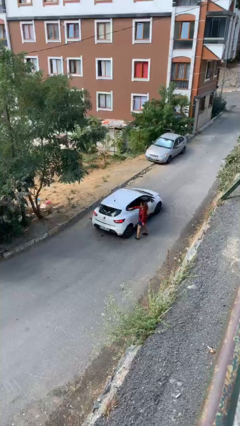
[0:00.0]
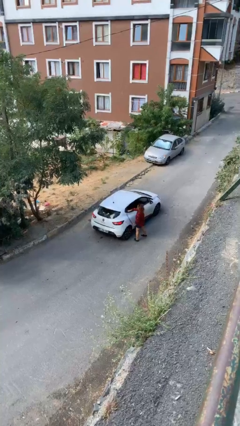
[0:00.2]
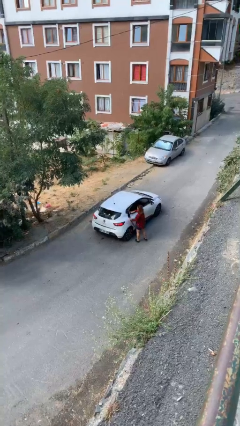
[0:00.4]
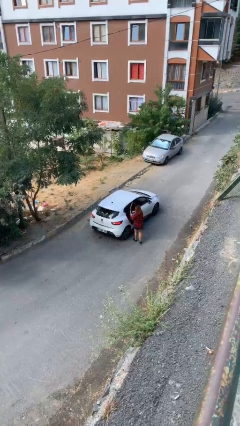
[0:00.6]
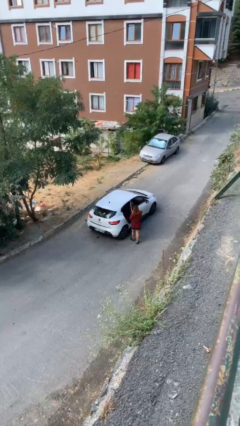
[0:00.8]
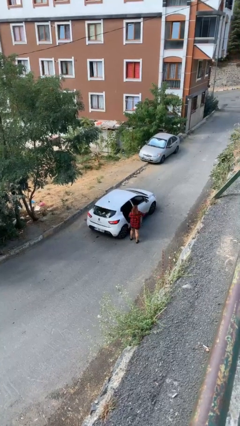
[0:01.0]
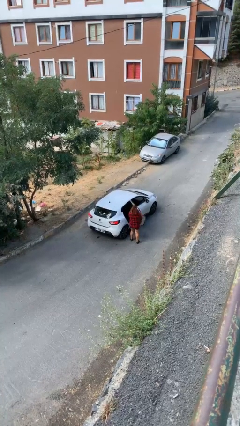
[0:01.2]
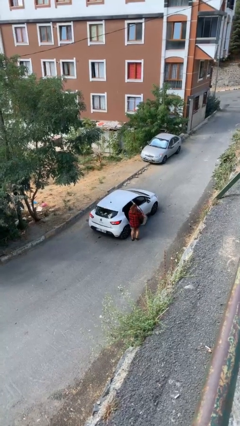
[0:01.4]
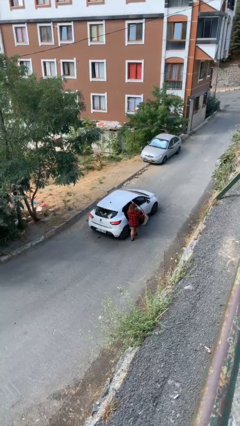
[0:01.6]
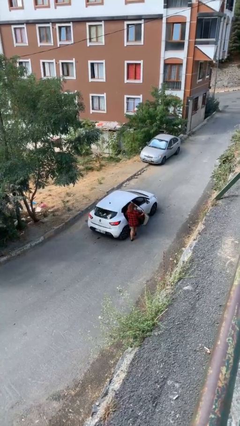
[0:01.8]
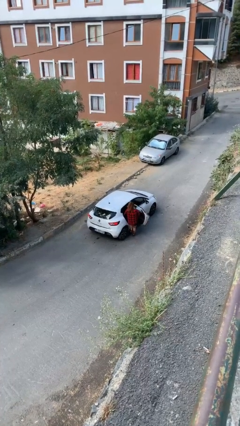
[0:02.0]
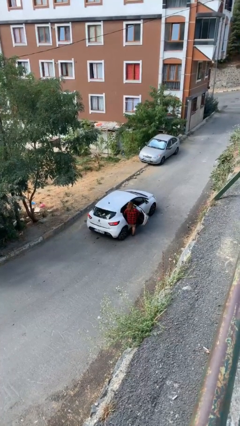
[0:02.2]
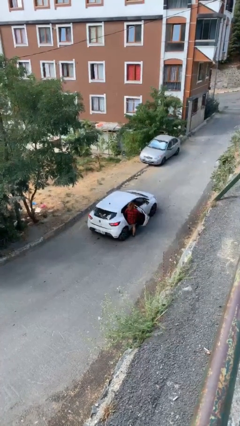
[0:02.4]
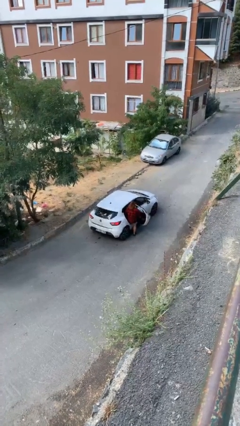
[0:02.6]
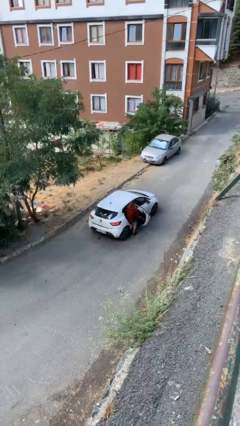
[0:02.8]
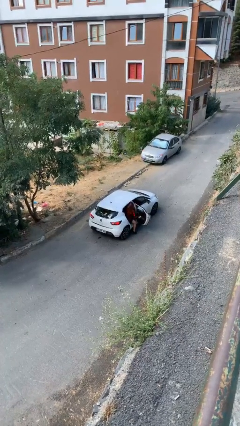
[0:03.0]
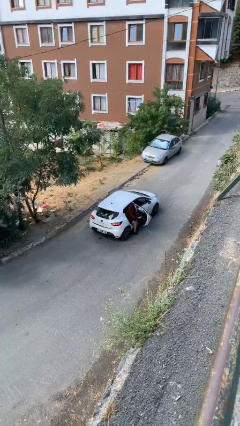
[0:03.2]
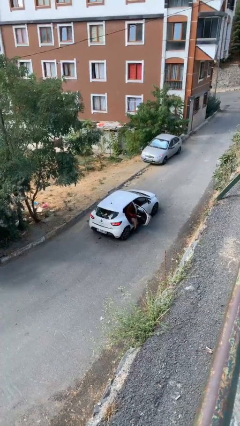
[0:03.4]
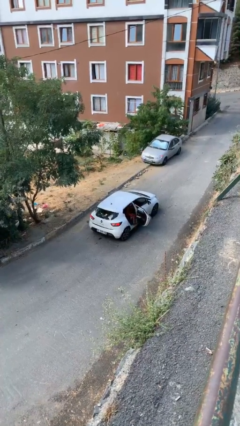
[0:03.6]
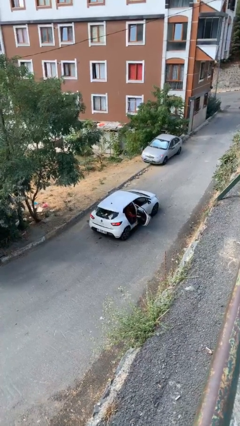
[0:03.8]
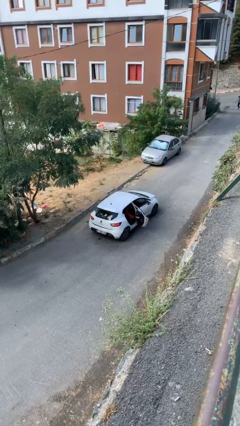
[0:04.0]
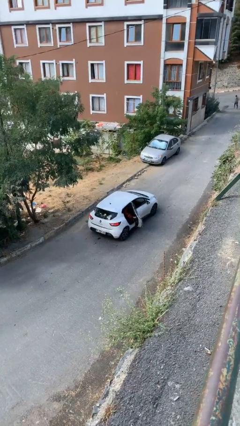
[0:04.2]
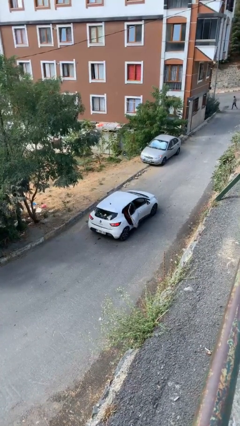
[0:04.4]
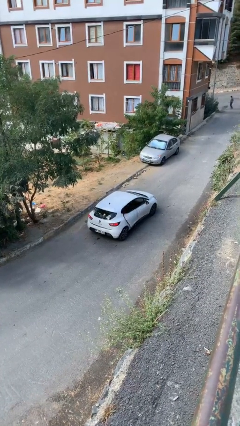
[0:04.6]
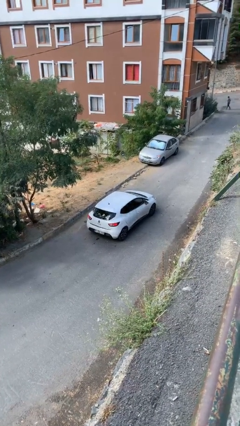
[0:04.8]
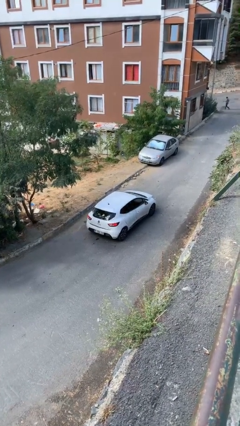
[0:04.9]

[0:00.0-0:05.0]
car picks up person

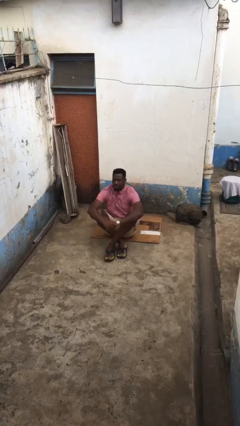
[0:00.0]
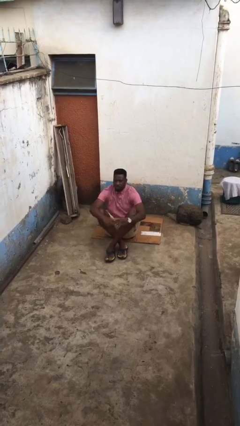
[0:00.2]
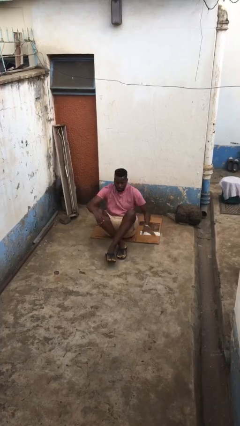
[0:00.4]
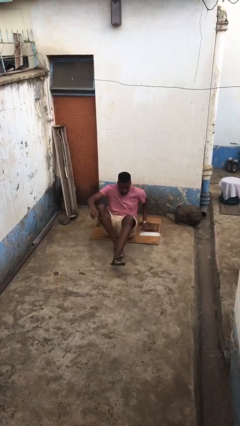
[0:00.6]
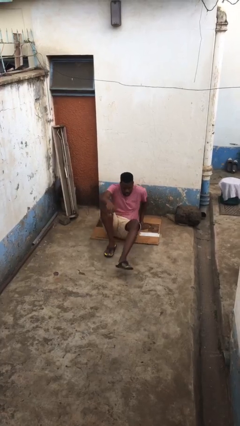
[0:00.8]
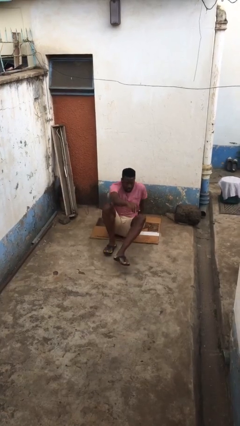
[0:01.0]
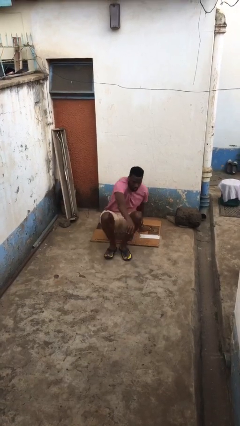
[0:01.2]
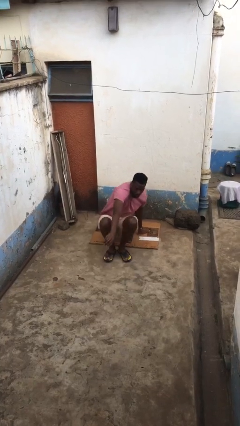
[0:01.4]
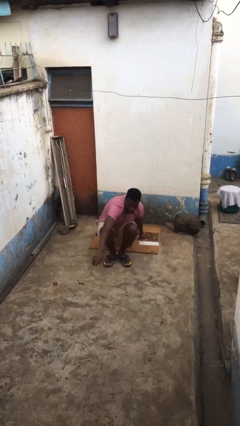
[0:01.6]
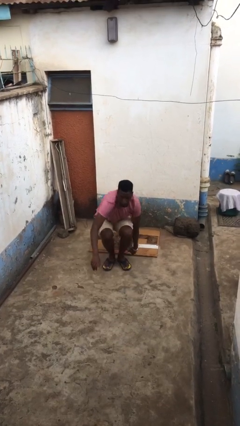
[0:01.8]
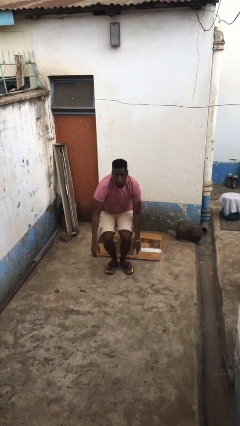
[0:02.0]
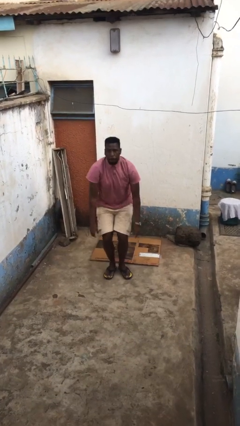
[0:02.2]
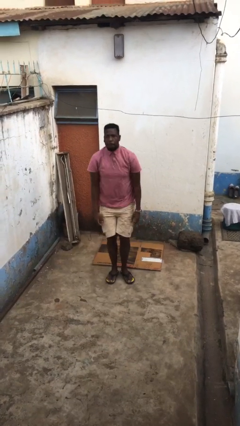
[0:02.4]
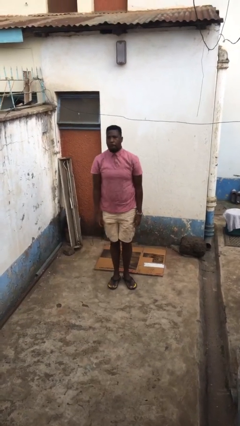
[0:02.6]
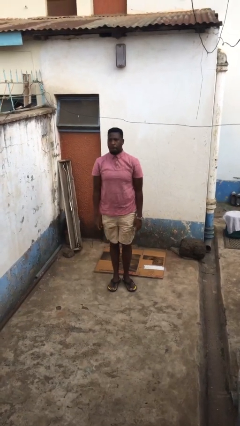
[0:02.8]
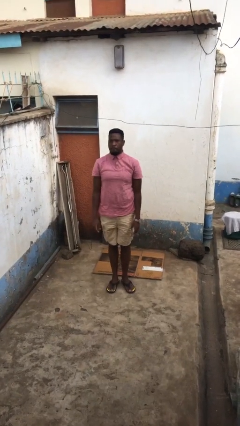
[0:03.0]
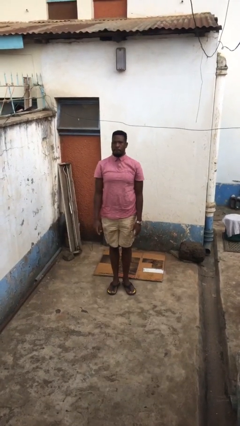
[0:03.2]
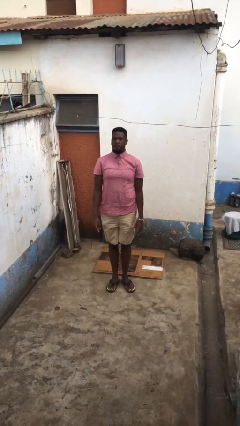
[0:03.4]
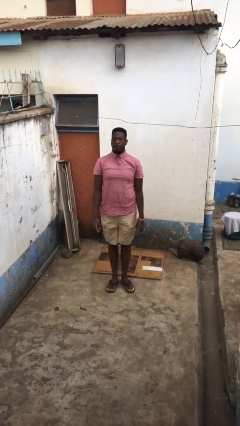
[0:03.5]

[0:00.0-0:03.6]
person stands up from floor

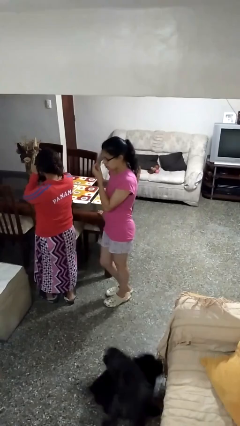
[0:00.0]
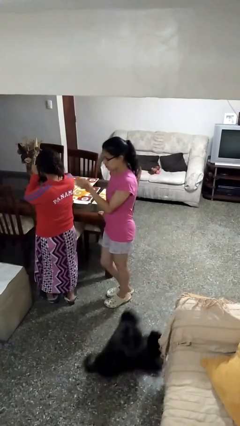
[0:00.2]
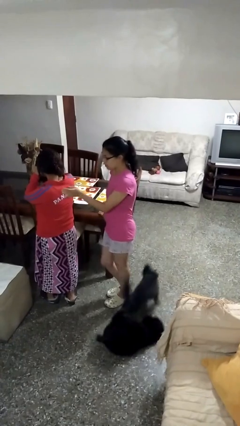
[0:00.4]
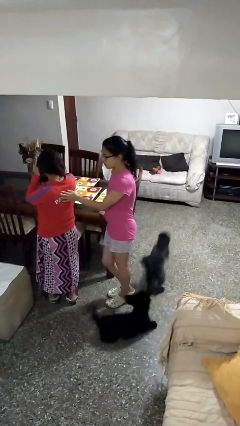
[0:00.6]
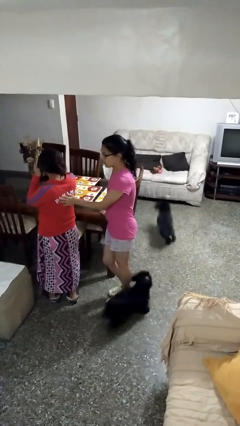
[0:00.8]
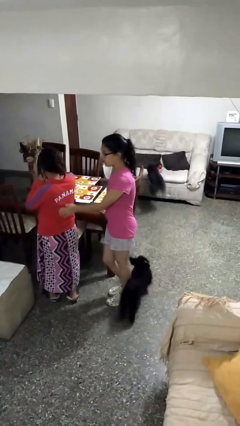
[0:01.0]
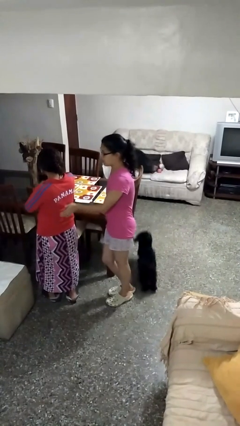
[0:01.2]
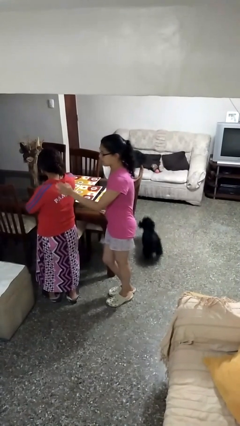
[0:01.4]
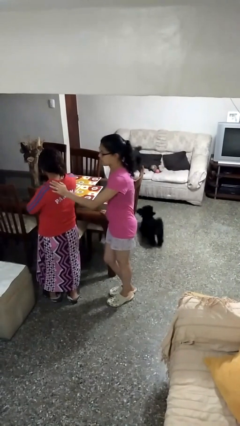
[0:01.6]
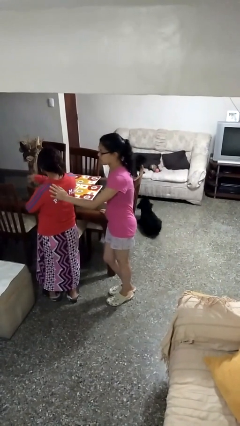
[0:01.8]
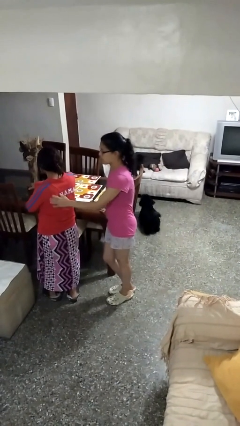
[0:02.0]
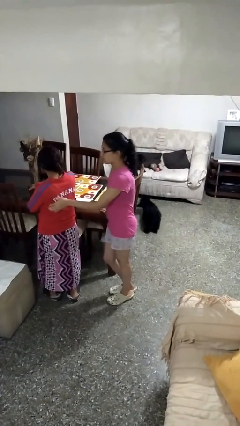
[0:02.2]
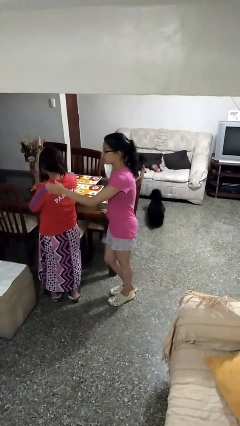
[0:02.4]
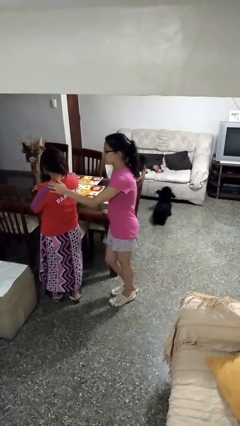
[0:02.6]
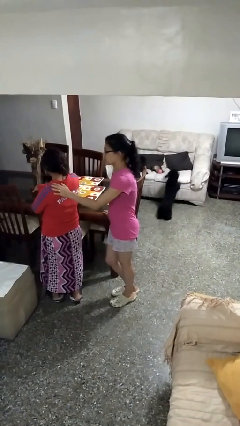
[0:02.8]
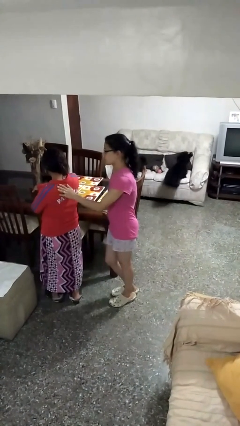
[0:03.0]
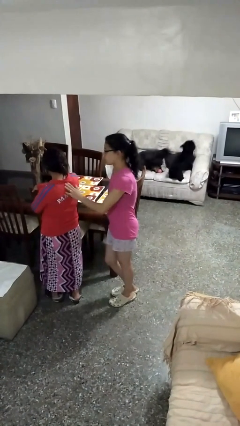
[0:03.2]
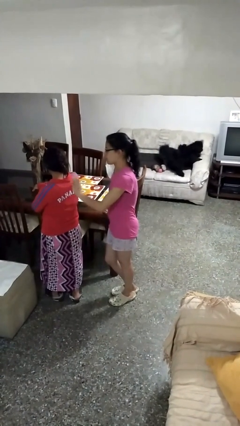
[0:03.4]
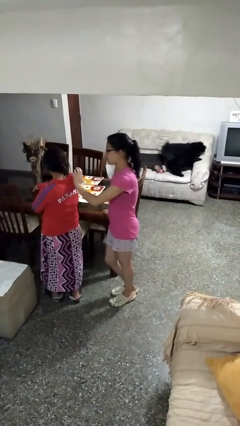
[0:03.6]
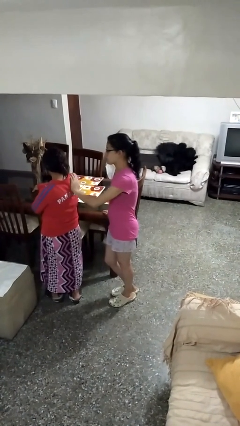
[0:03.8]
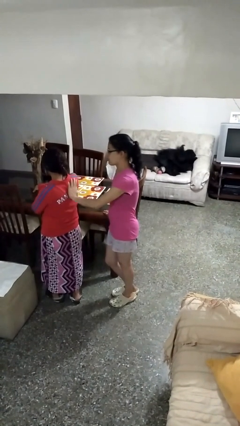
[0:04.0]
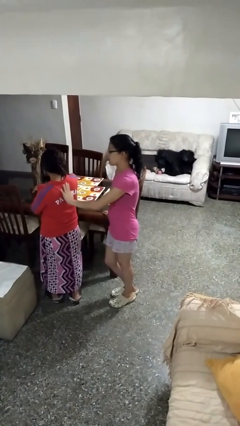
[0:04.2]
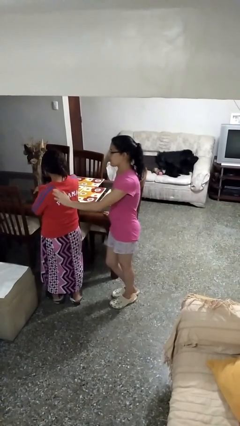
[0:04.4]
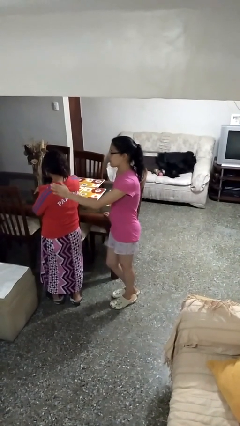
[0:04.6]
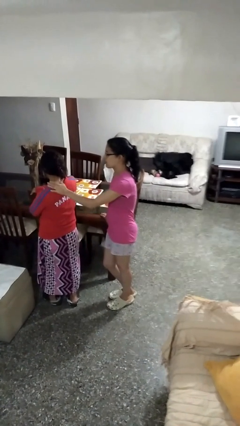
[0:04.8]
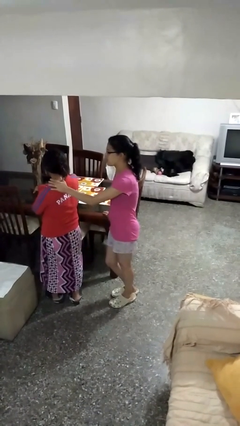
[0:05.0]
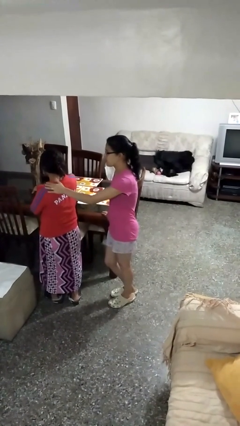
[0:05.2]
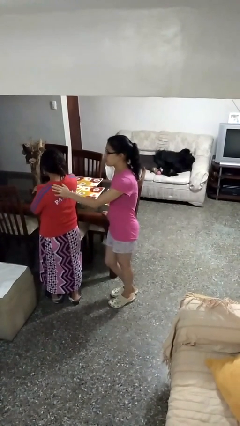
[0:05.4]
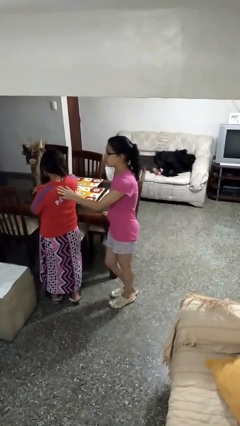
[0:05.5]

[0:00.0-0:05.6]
person touches back of person

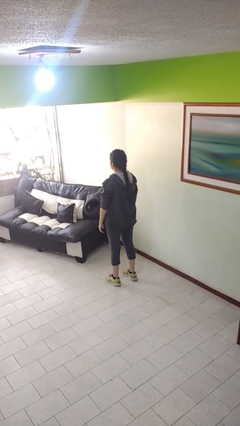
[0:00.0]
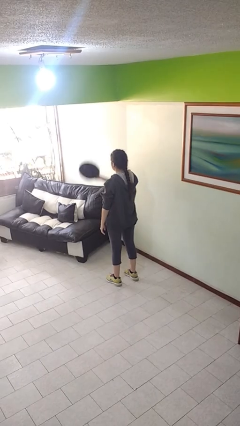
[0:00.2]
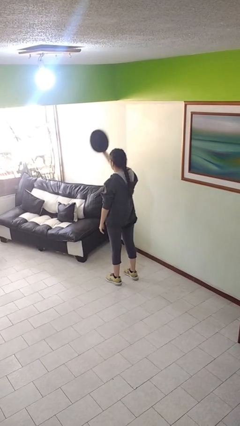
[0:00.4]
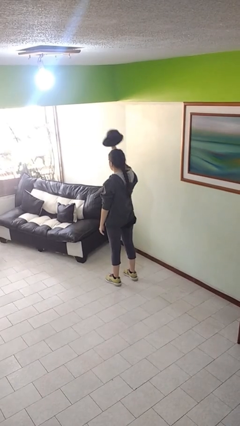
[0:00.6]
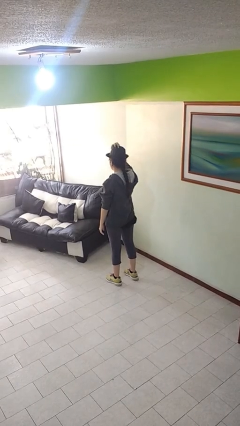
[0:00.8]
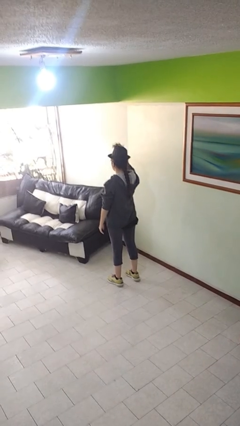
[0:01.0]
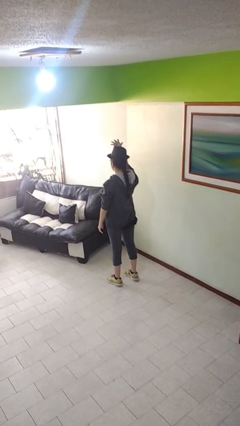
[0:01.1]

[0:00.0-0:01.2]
person puts on hat

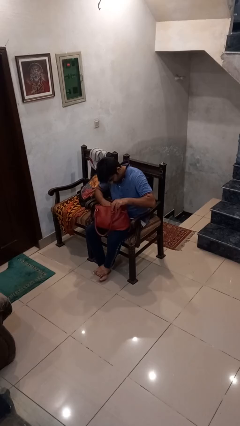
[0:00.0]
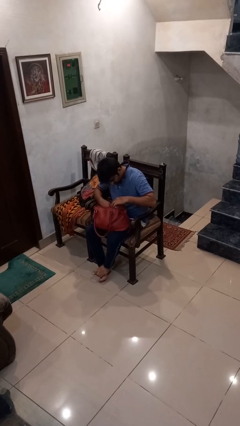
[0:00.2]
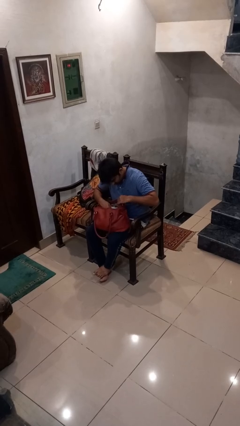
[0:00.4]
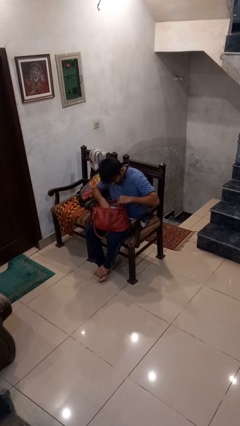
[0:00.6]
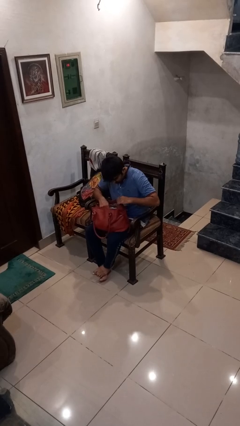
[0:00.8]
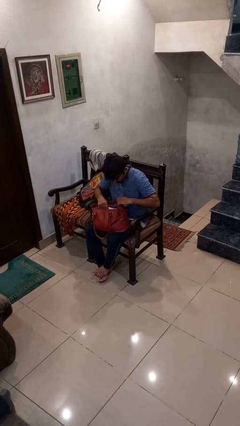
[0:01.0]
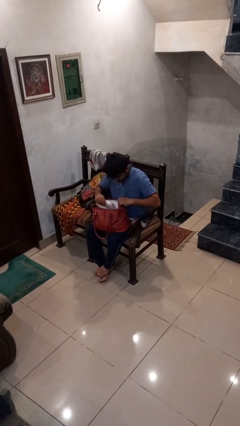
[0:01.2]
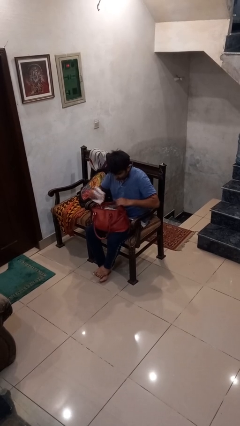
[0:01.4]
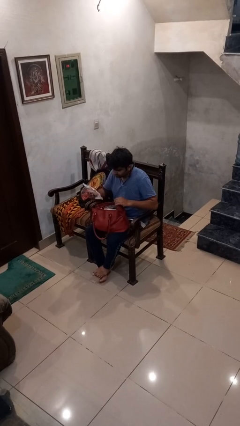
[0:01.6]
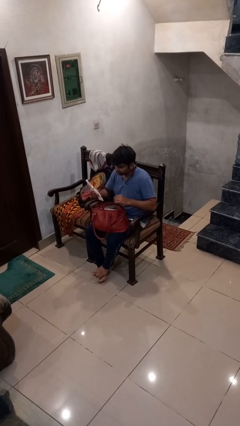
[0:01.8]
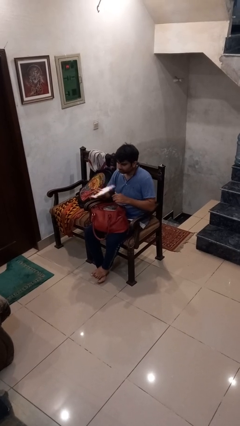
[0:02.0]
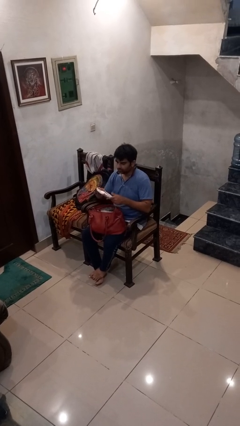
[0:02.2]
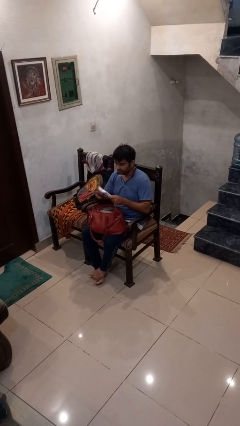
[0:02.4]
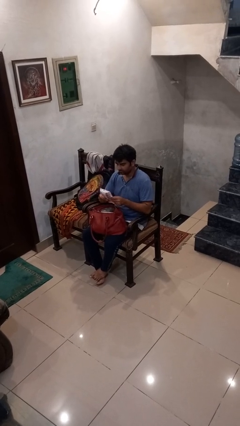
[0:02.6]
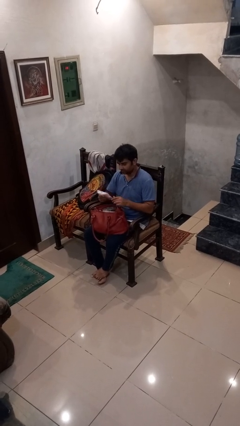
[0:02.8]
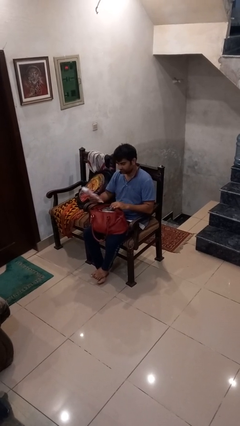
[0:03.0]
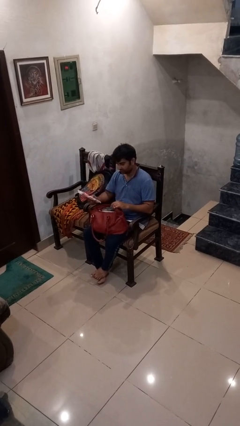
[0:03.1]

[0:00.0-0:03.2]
person takes object from purse
